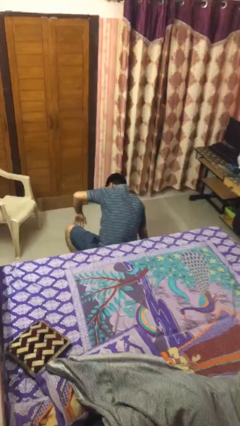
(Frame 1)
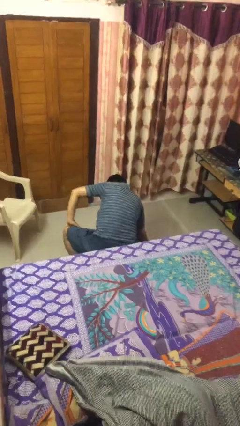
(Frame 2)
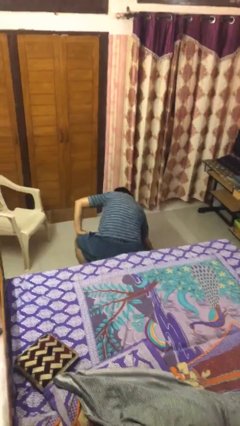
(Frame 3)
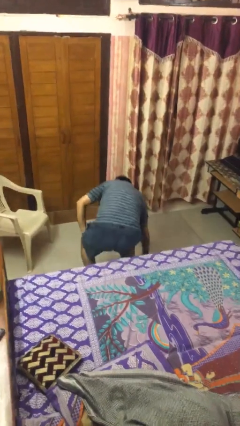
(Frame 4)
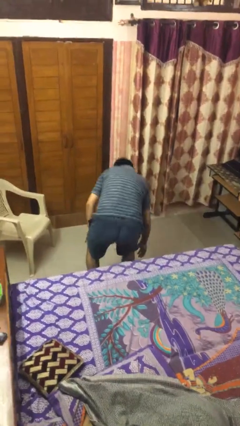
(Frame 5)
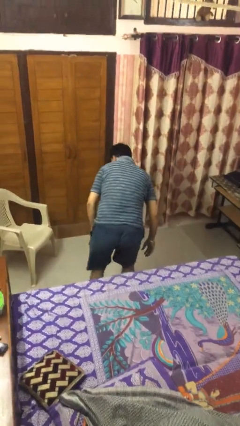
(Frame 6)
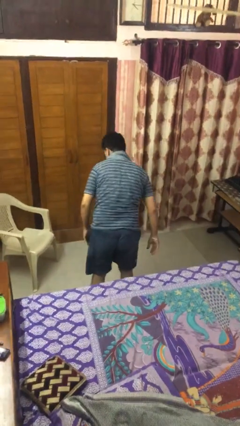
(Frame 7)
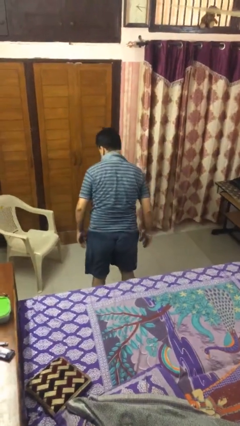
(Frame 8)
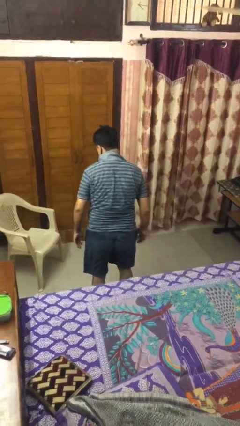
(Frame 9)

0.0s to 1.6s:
person stands up from floor

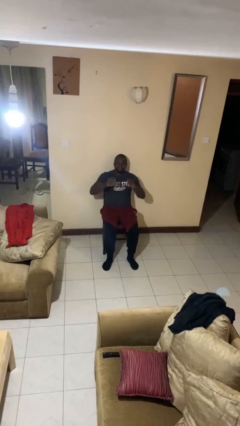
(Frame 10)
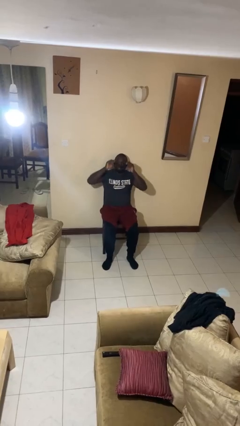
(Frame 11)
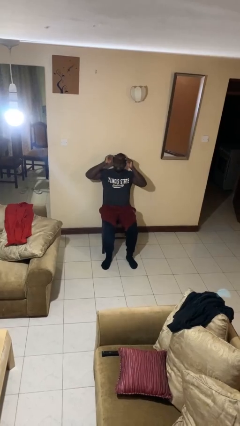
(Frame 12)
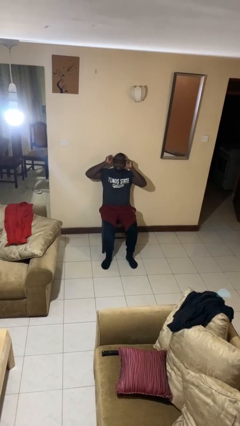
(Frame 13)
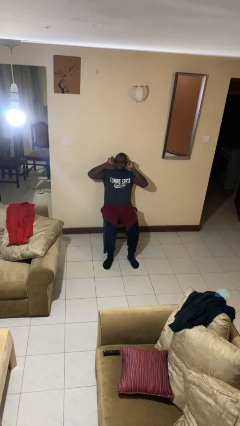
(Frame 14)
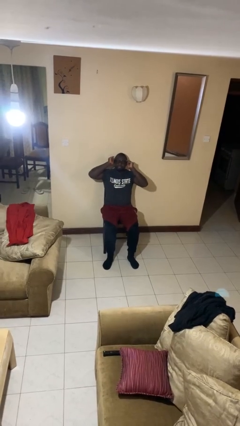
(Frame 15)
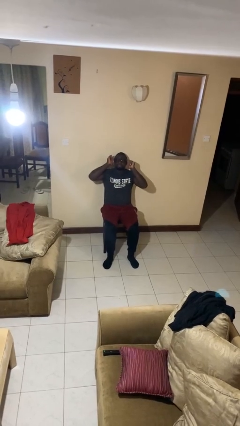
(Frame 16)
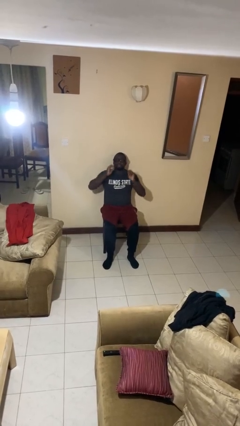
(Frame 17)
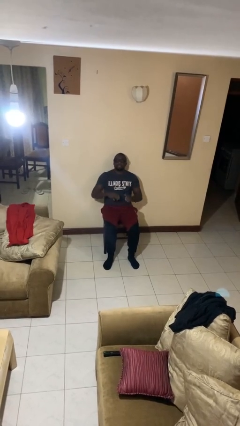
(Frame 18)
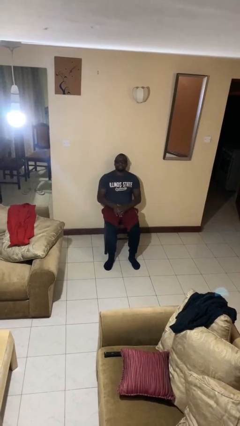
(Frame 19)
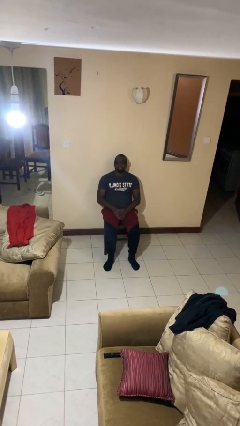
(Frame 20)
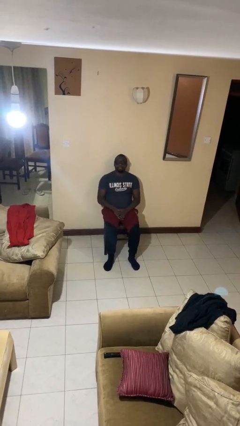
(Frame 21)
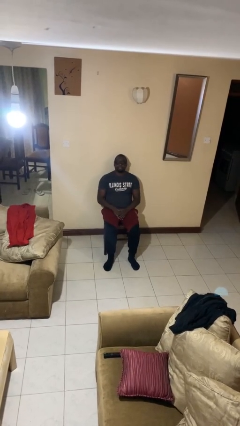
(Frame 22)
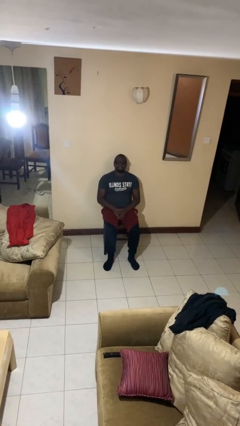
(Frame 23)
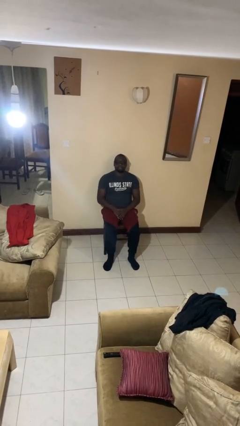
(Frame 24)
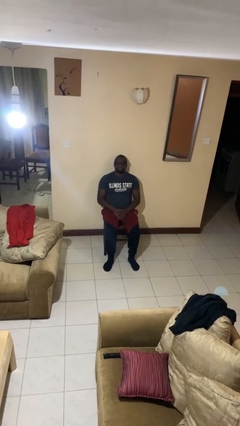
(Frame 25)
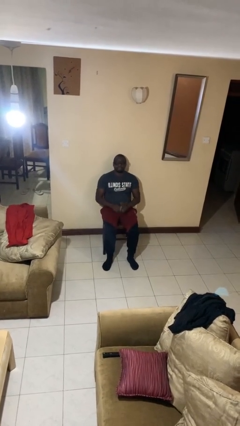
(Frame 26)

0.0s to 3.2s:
person puts on glasses

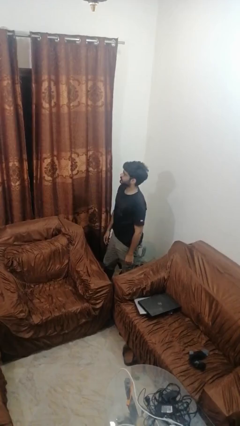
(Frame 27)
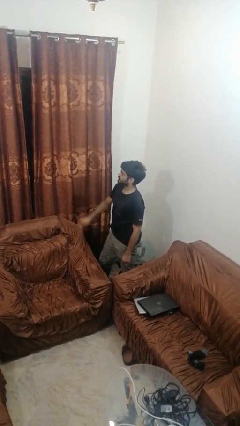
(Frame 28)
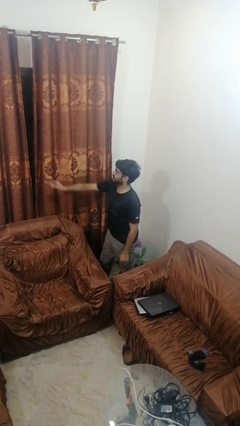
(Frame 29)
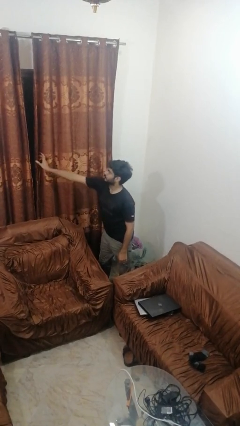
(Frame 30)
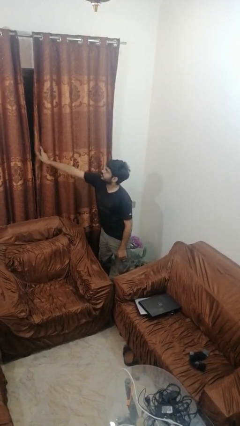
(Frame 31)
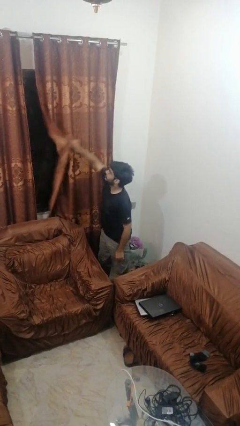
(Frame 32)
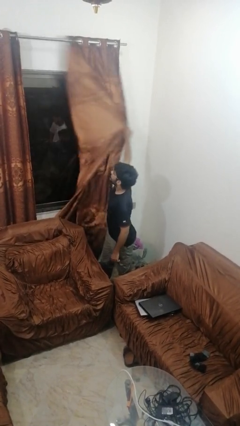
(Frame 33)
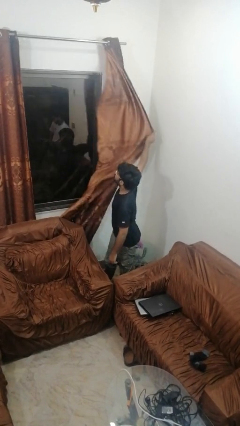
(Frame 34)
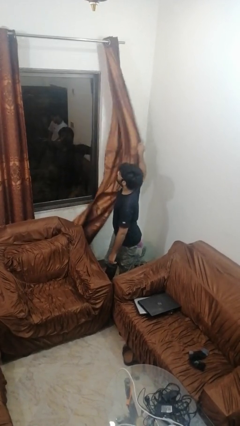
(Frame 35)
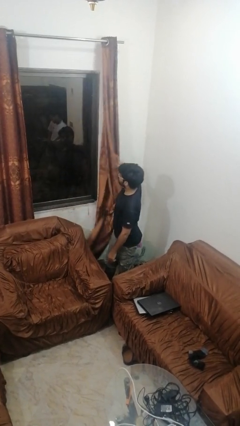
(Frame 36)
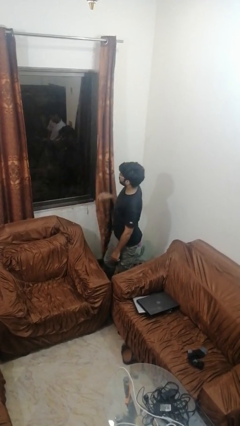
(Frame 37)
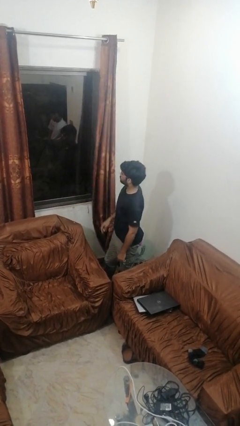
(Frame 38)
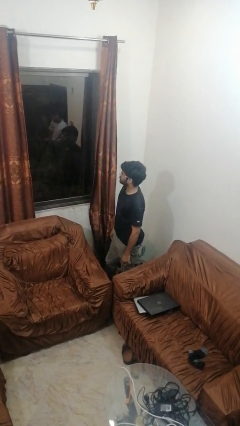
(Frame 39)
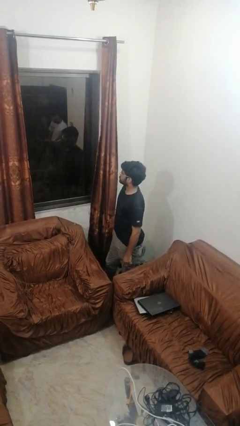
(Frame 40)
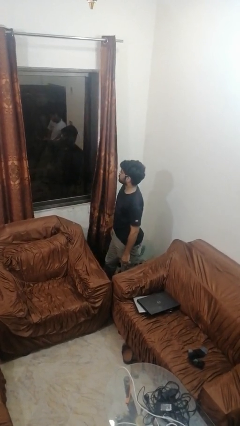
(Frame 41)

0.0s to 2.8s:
person opens curtains

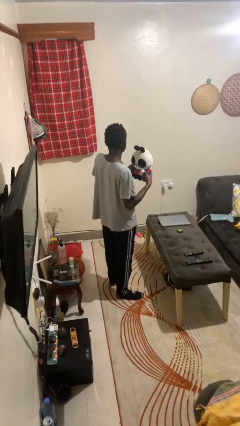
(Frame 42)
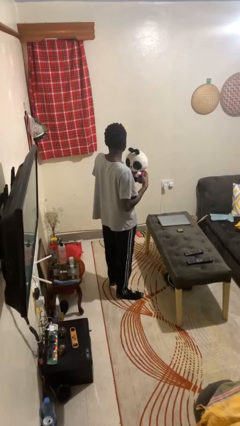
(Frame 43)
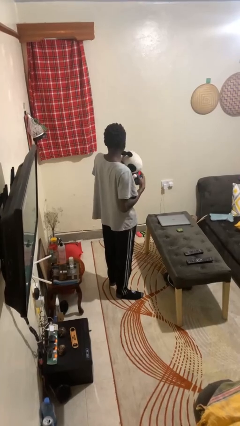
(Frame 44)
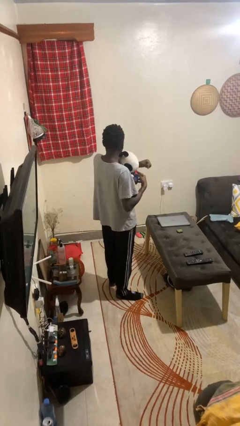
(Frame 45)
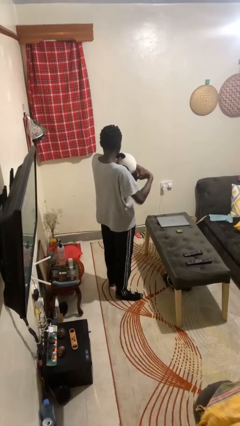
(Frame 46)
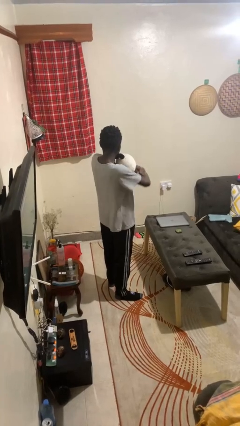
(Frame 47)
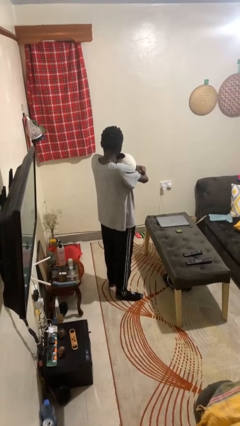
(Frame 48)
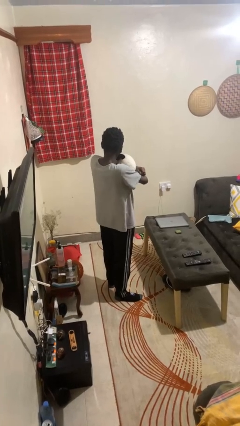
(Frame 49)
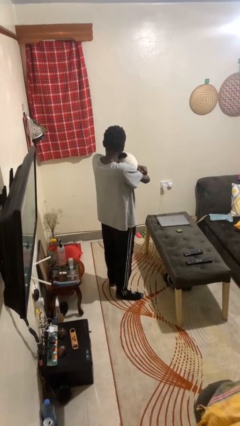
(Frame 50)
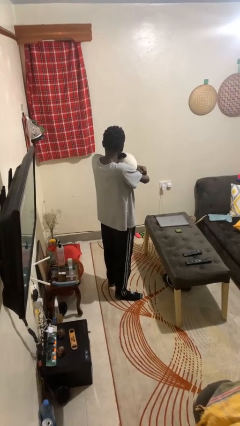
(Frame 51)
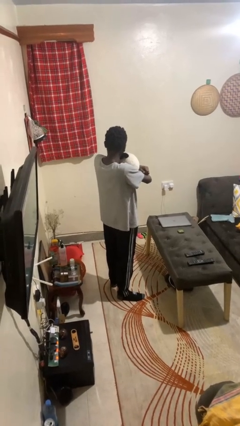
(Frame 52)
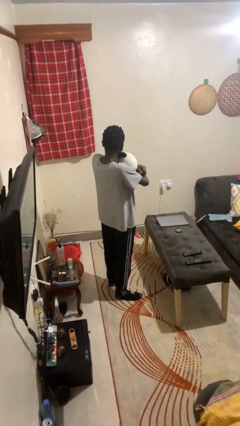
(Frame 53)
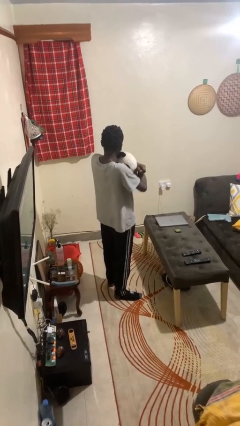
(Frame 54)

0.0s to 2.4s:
person hugs stuffed animal

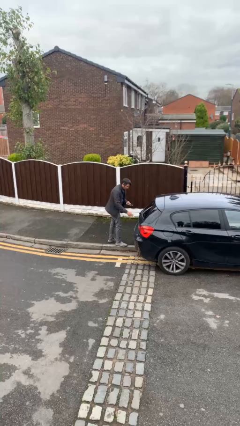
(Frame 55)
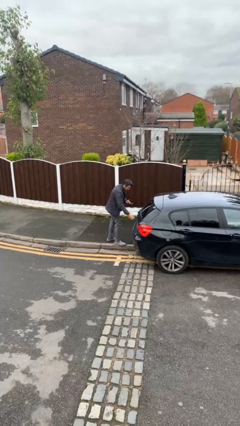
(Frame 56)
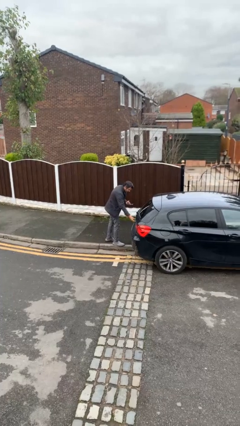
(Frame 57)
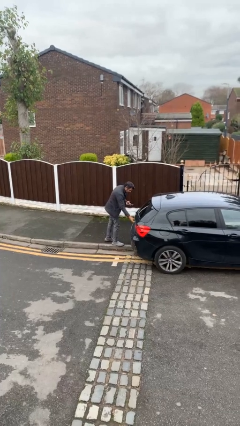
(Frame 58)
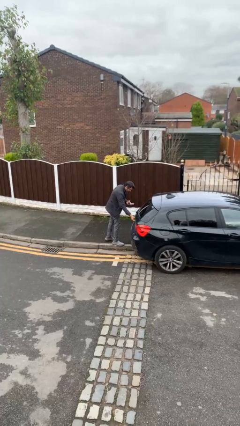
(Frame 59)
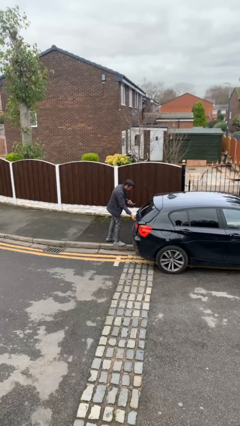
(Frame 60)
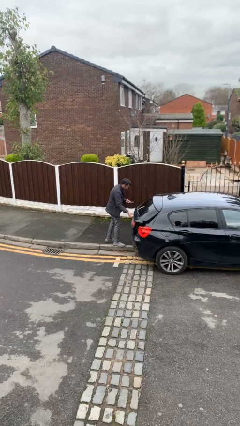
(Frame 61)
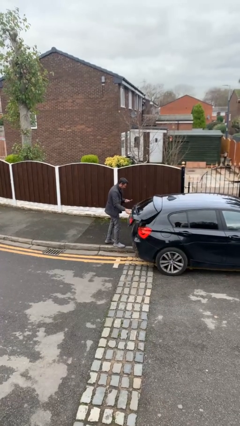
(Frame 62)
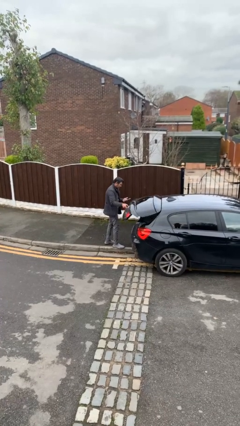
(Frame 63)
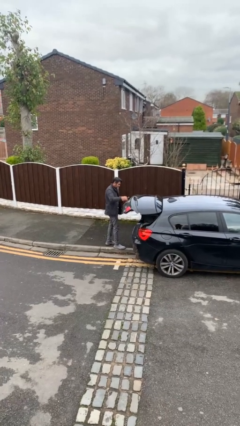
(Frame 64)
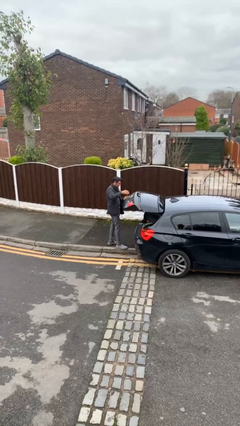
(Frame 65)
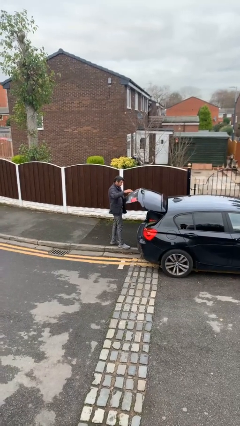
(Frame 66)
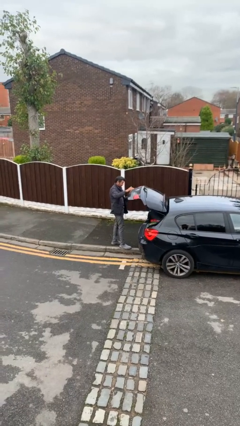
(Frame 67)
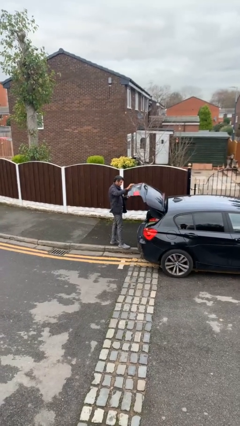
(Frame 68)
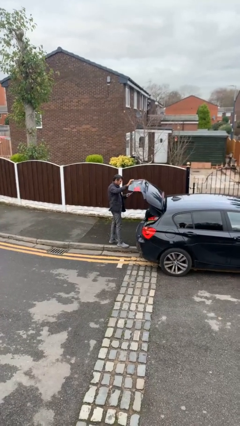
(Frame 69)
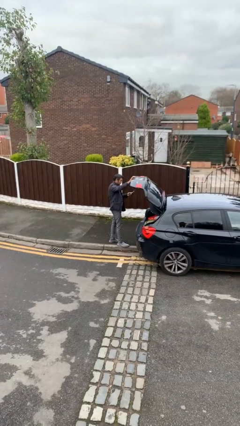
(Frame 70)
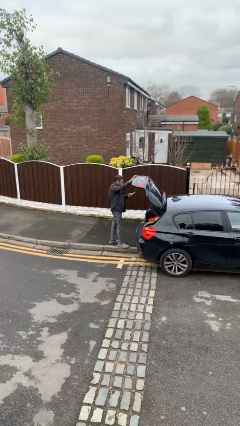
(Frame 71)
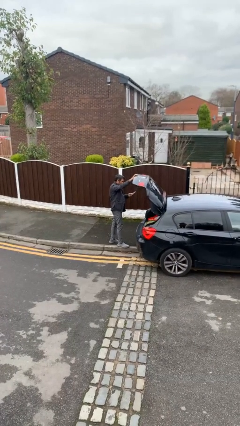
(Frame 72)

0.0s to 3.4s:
person opens car trunk

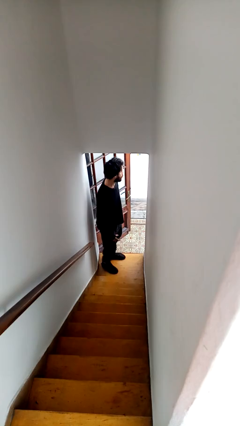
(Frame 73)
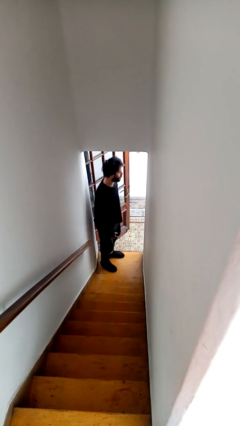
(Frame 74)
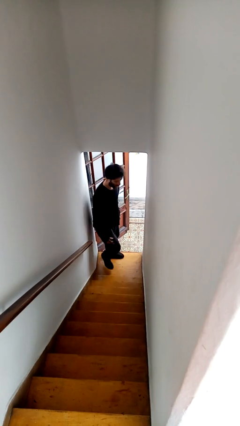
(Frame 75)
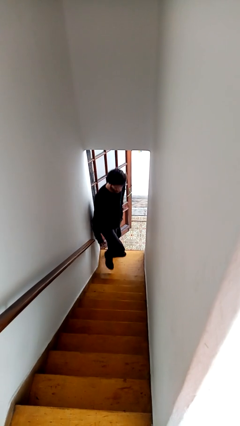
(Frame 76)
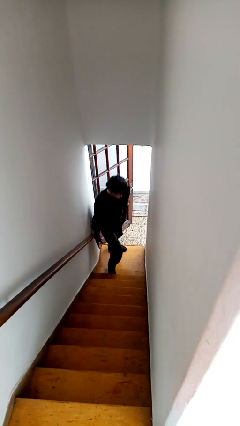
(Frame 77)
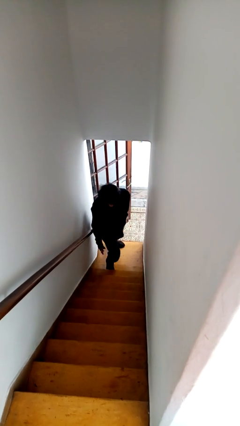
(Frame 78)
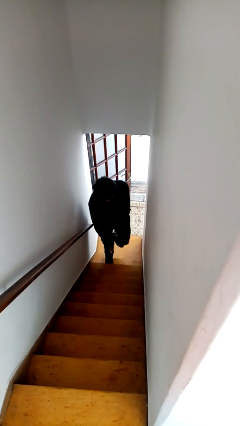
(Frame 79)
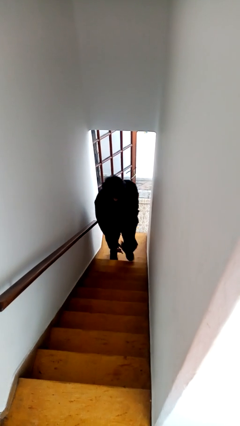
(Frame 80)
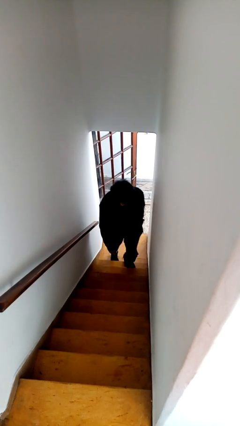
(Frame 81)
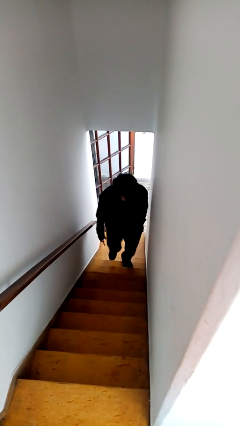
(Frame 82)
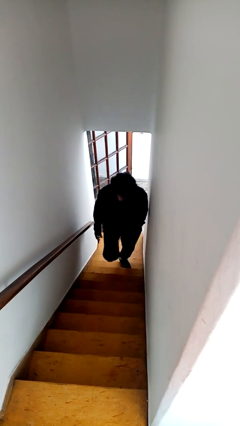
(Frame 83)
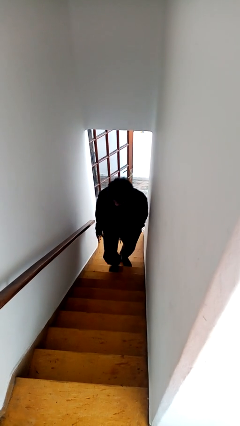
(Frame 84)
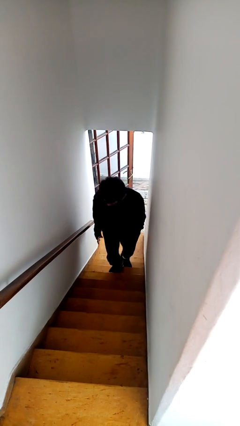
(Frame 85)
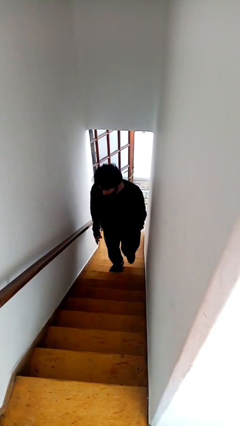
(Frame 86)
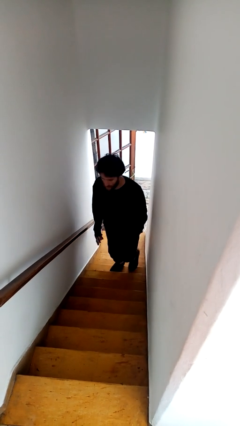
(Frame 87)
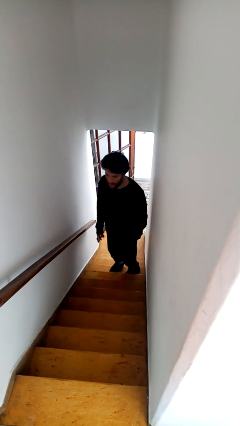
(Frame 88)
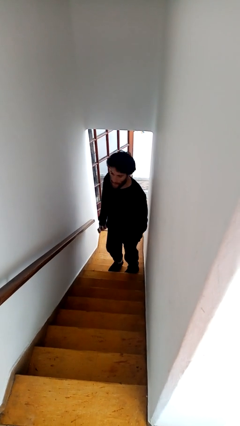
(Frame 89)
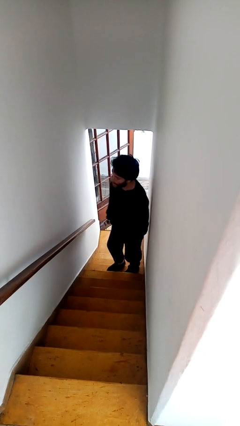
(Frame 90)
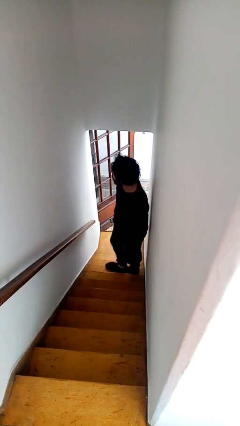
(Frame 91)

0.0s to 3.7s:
person climbs up stairs

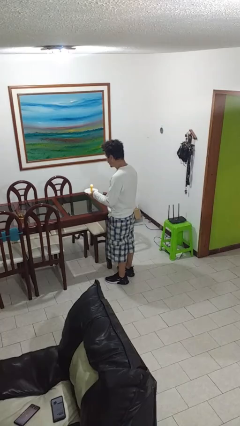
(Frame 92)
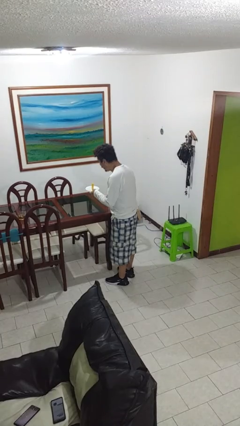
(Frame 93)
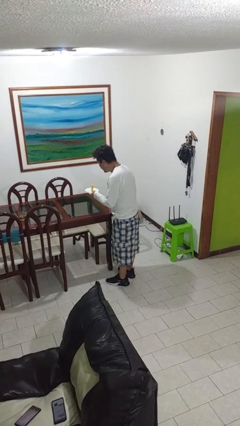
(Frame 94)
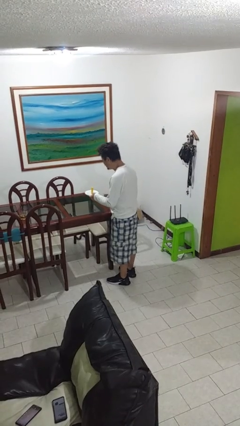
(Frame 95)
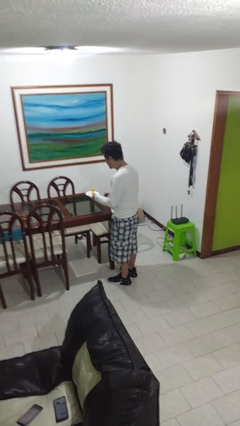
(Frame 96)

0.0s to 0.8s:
person extinguishes candle
